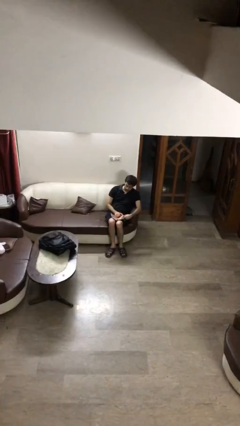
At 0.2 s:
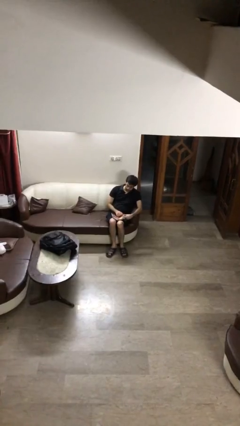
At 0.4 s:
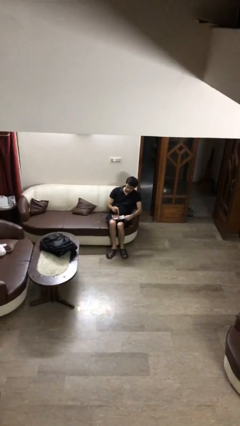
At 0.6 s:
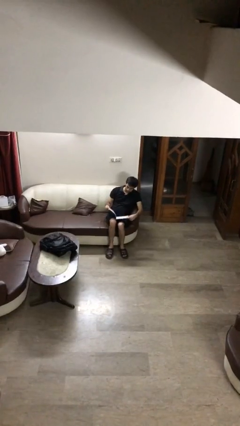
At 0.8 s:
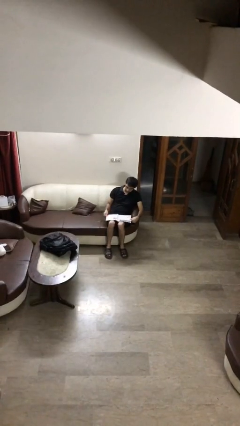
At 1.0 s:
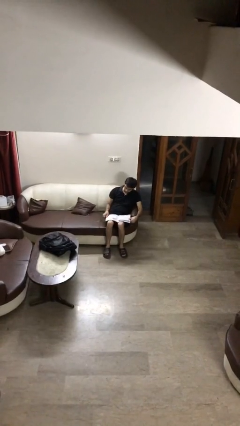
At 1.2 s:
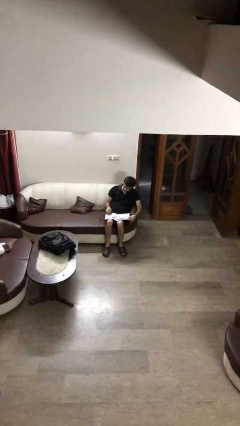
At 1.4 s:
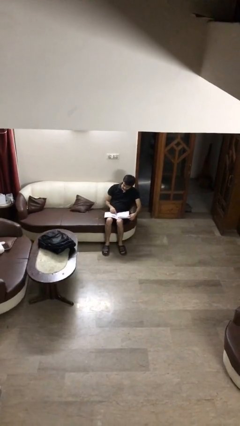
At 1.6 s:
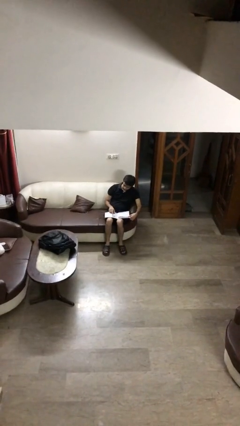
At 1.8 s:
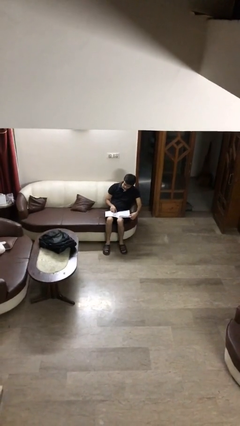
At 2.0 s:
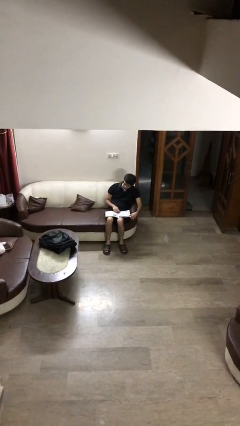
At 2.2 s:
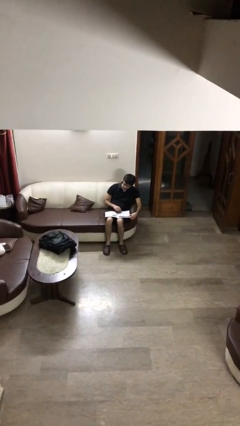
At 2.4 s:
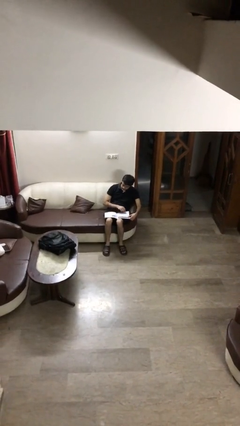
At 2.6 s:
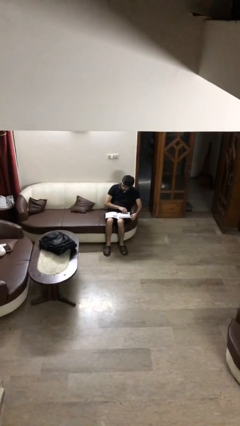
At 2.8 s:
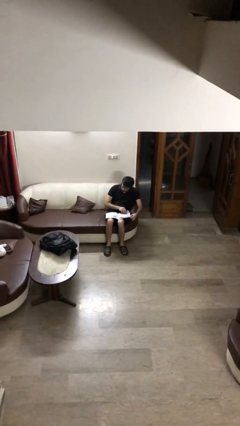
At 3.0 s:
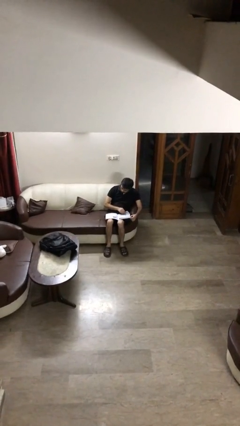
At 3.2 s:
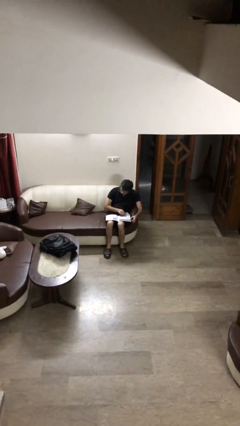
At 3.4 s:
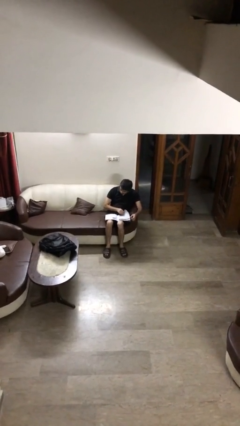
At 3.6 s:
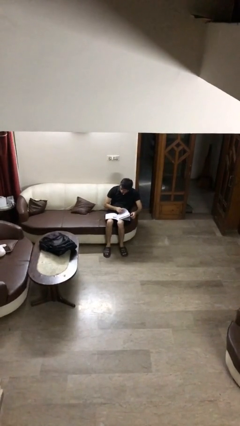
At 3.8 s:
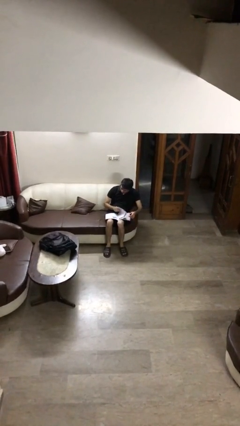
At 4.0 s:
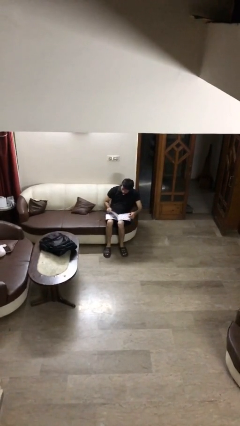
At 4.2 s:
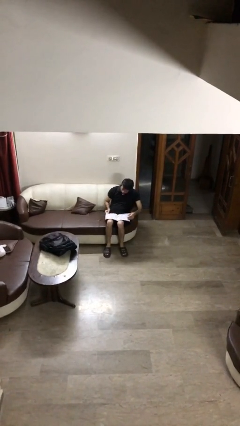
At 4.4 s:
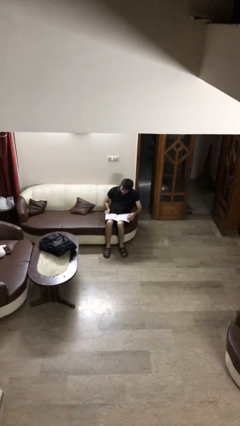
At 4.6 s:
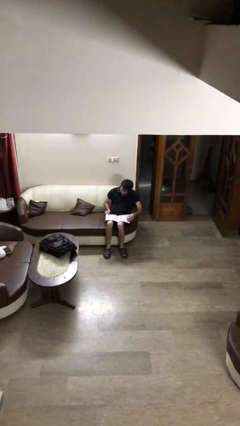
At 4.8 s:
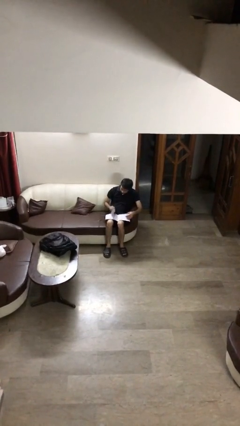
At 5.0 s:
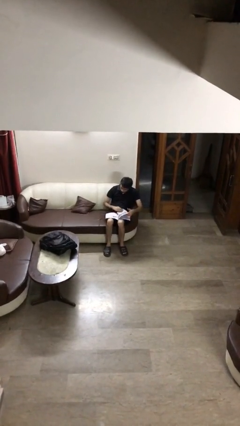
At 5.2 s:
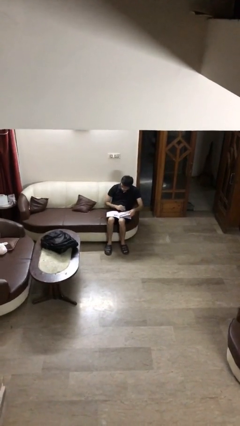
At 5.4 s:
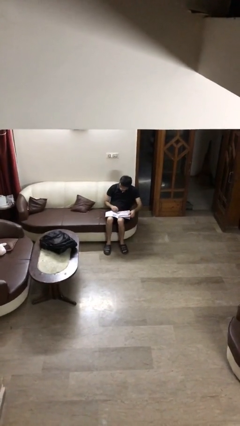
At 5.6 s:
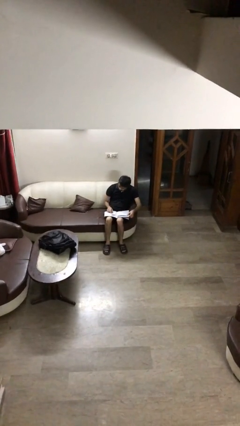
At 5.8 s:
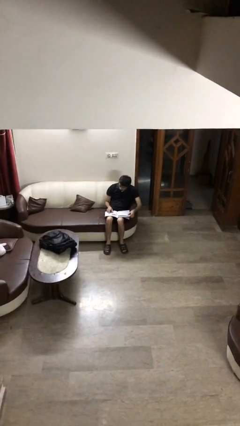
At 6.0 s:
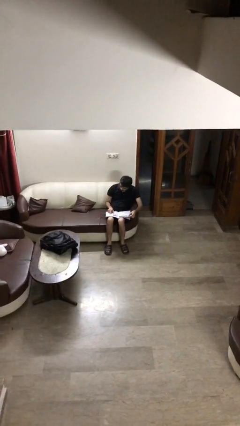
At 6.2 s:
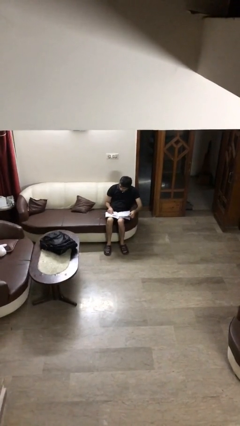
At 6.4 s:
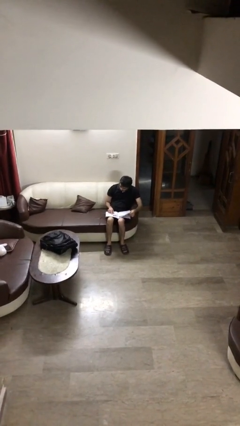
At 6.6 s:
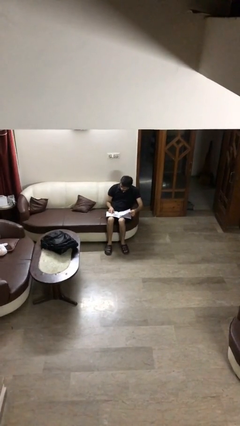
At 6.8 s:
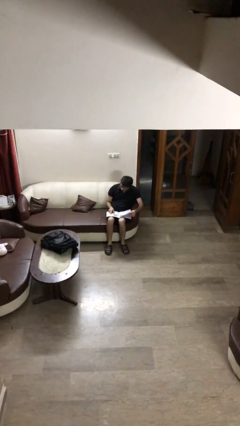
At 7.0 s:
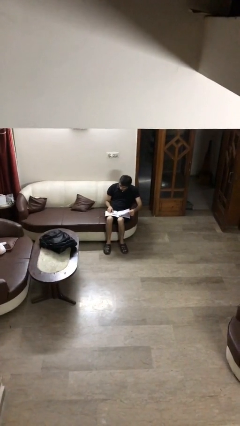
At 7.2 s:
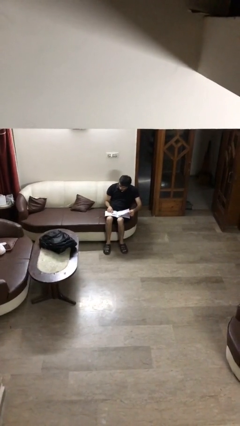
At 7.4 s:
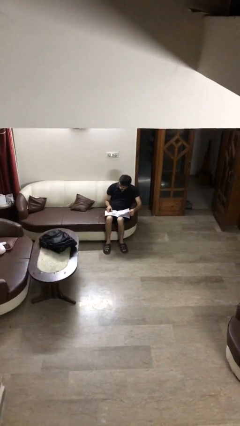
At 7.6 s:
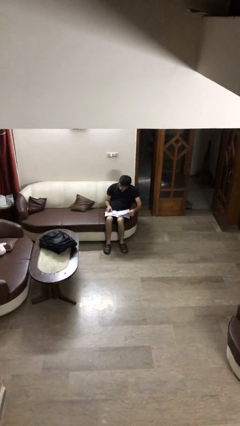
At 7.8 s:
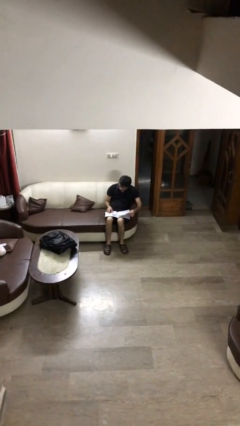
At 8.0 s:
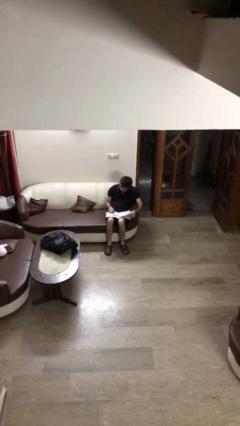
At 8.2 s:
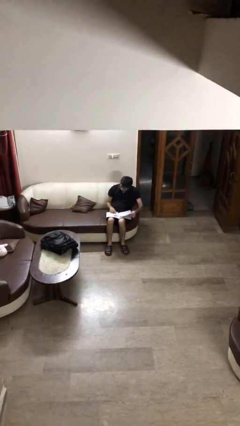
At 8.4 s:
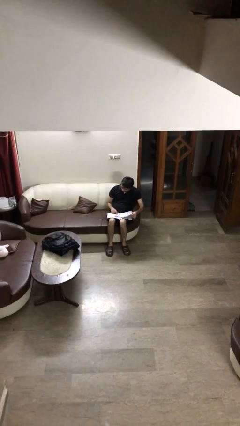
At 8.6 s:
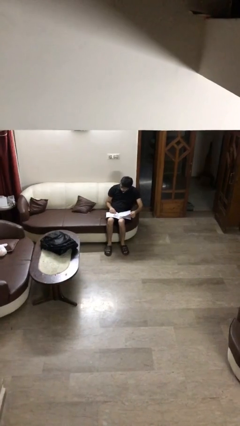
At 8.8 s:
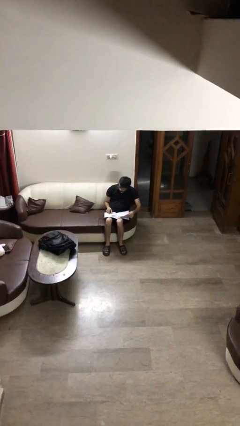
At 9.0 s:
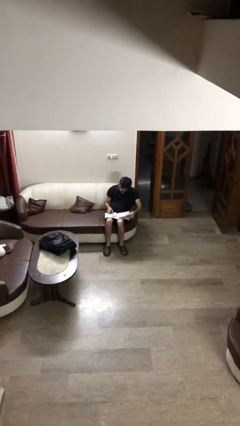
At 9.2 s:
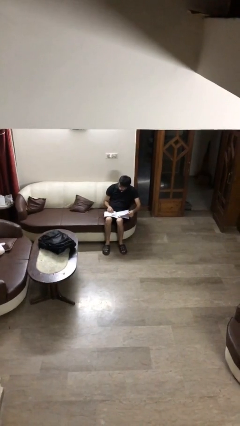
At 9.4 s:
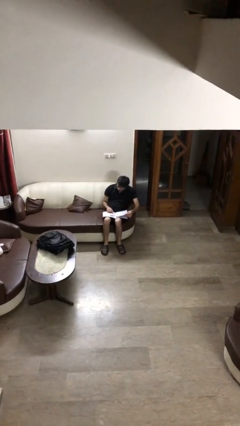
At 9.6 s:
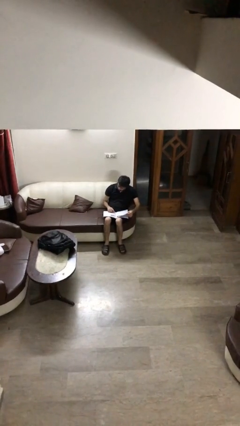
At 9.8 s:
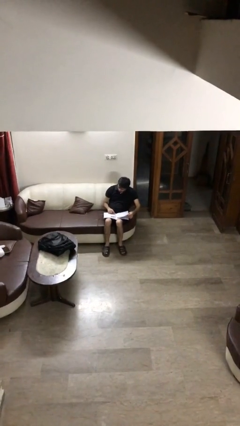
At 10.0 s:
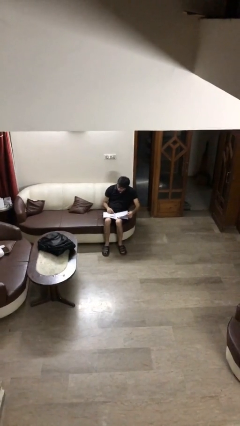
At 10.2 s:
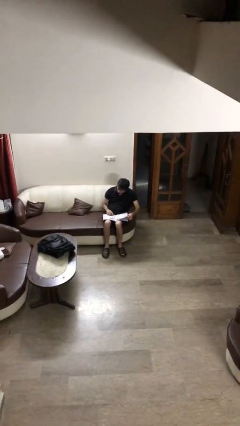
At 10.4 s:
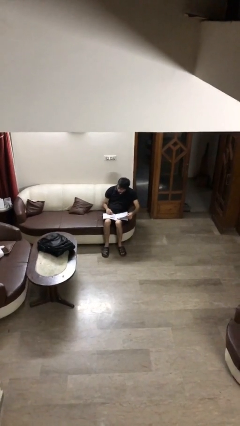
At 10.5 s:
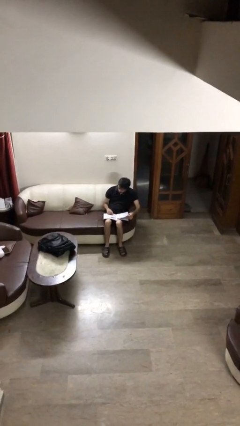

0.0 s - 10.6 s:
person reads document

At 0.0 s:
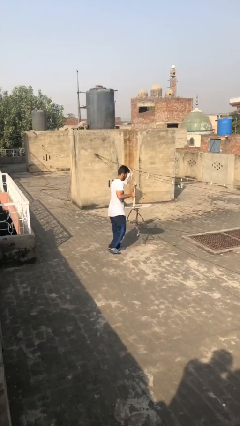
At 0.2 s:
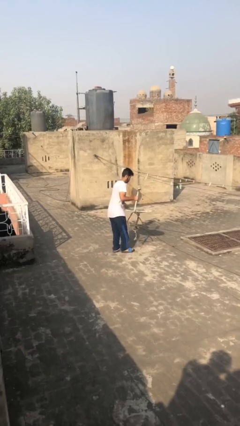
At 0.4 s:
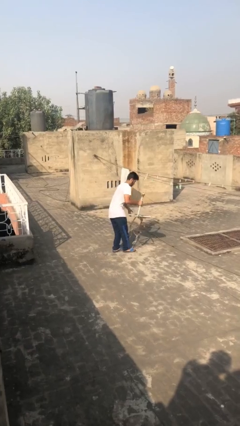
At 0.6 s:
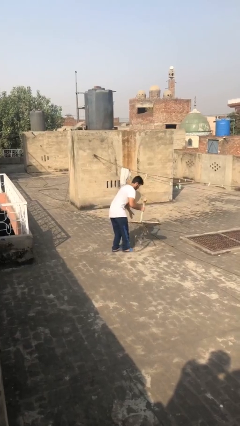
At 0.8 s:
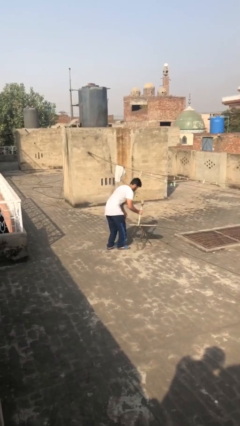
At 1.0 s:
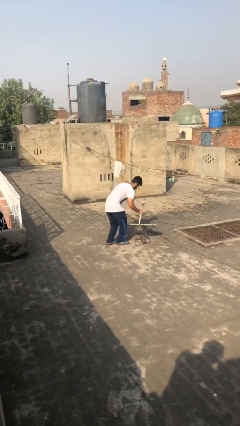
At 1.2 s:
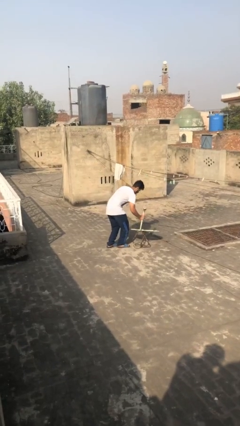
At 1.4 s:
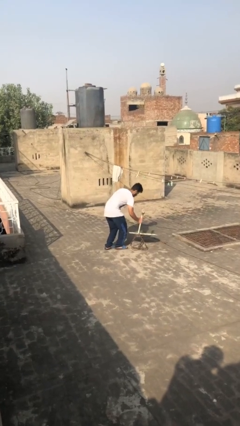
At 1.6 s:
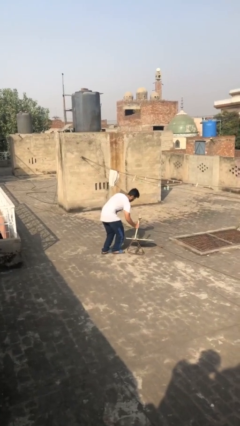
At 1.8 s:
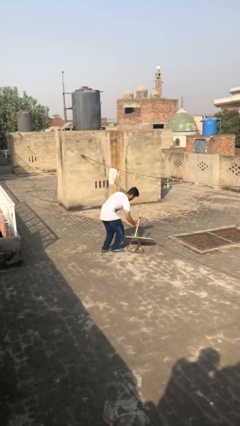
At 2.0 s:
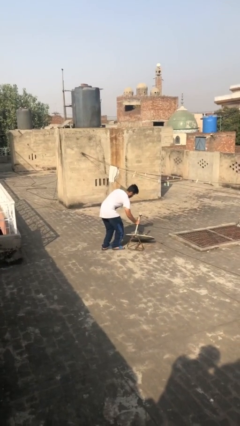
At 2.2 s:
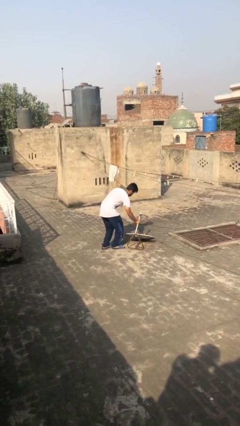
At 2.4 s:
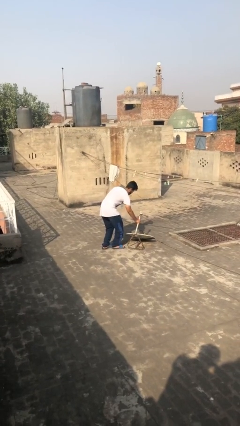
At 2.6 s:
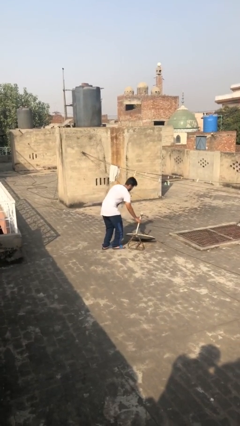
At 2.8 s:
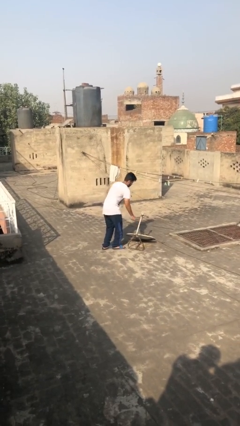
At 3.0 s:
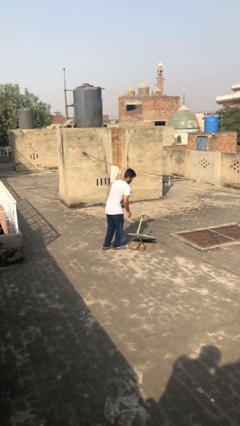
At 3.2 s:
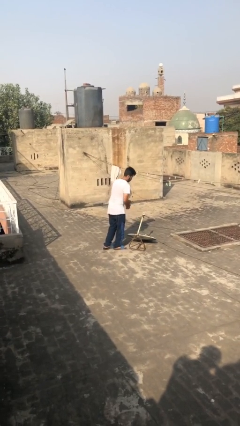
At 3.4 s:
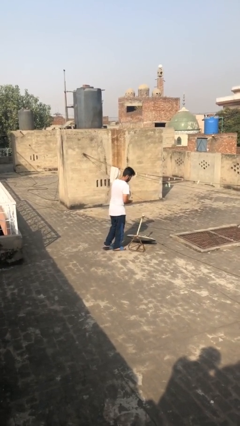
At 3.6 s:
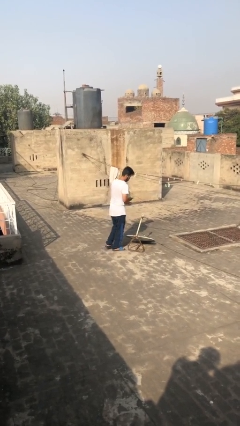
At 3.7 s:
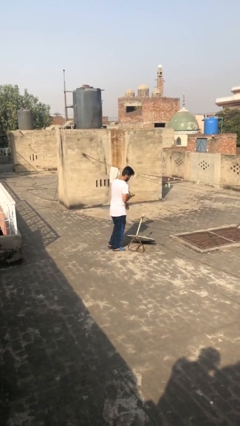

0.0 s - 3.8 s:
person puts down object on floor

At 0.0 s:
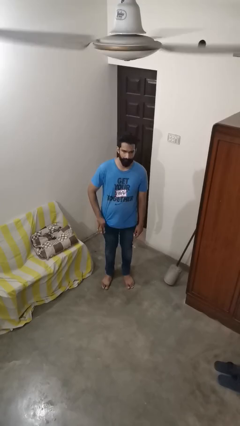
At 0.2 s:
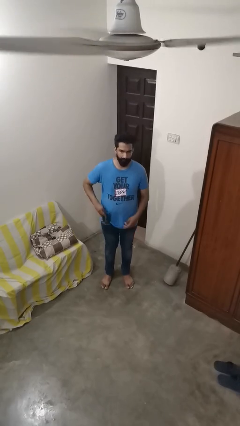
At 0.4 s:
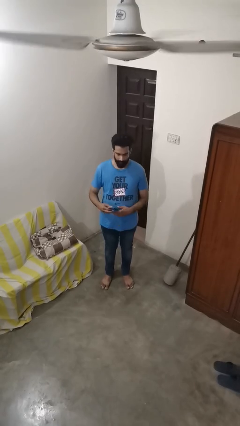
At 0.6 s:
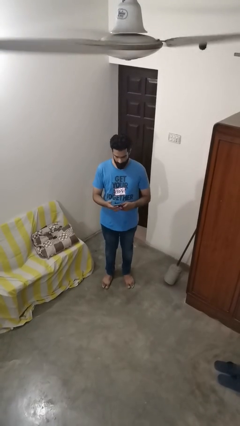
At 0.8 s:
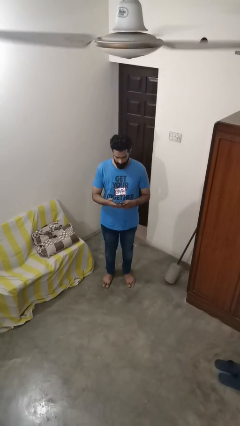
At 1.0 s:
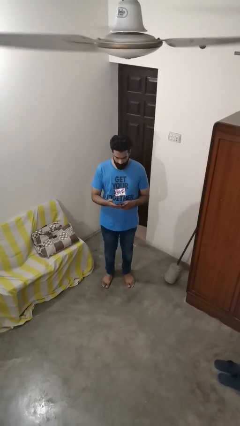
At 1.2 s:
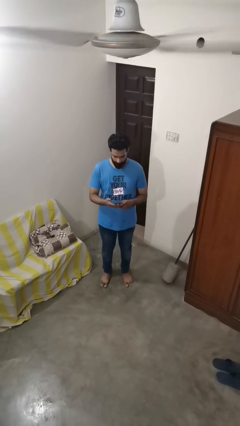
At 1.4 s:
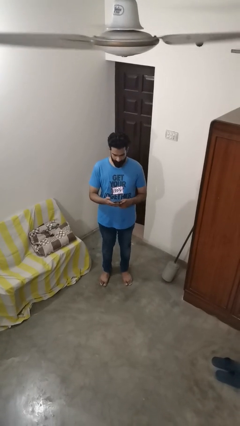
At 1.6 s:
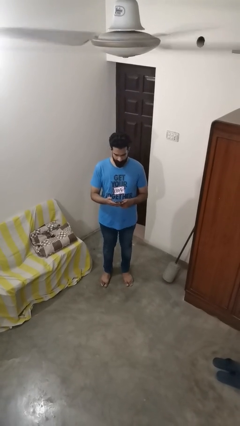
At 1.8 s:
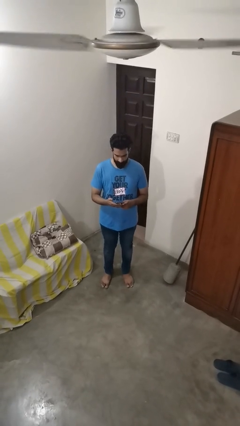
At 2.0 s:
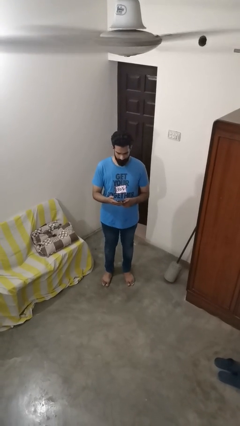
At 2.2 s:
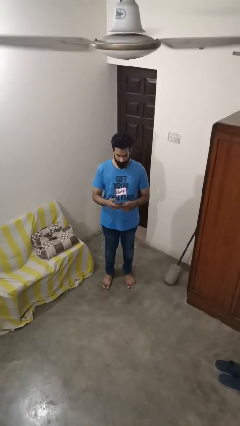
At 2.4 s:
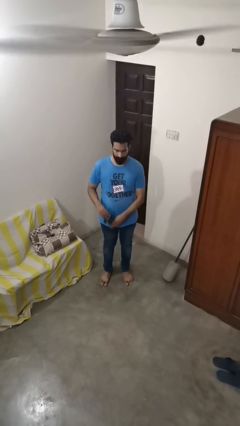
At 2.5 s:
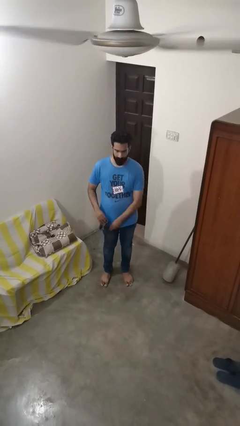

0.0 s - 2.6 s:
person takes phone from pocket

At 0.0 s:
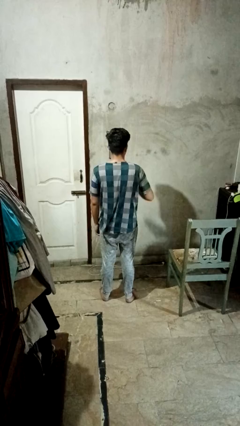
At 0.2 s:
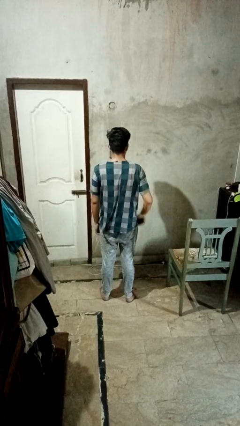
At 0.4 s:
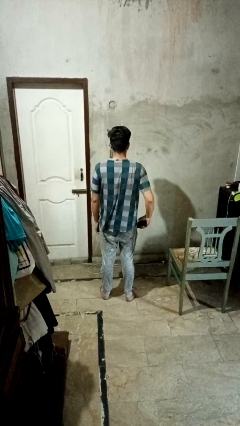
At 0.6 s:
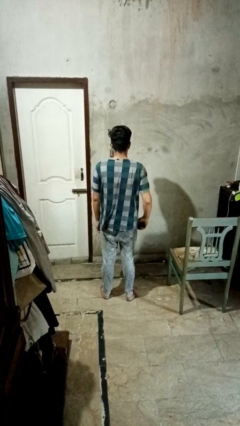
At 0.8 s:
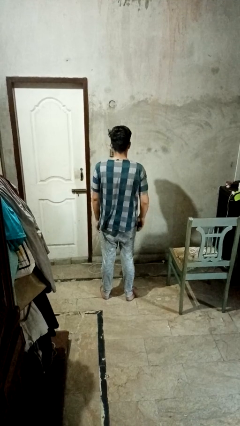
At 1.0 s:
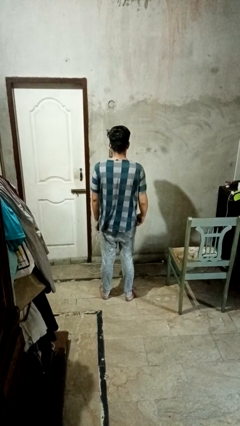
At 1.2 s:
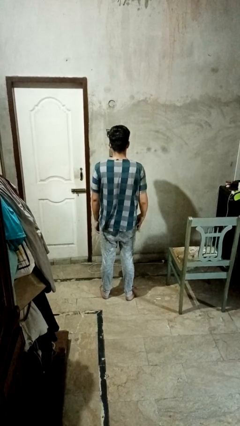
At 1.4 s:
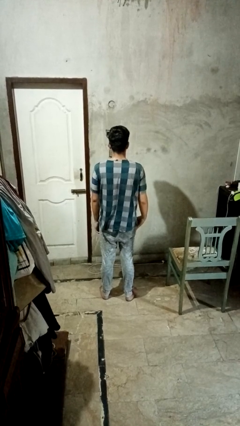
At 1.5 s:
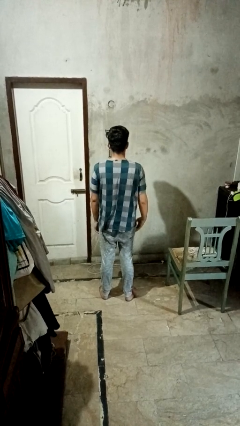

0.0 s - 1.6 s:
person puts phone into pocket
